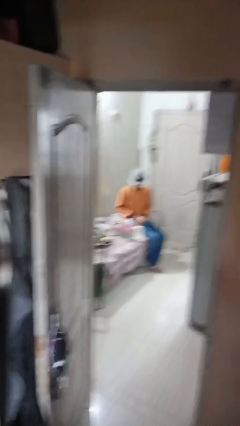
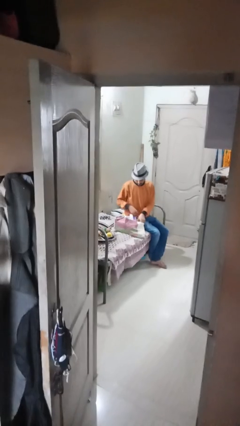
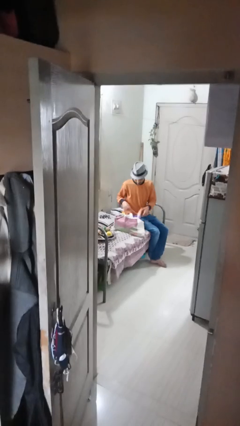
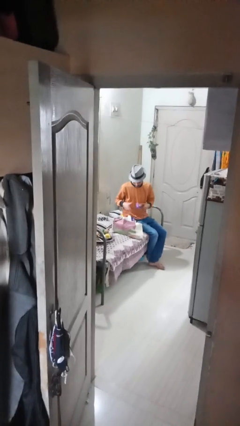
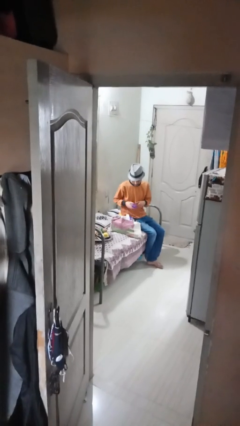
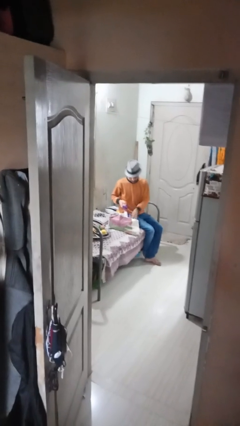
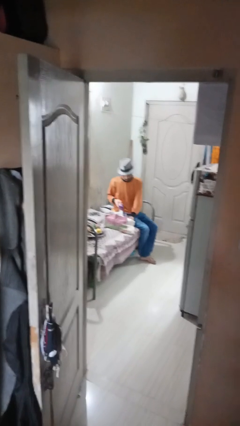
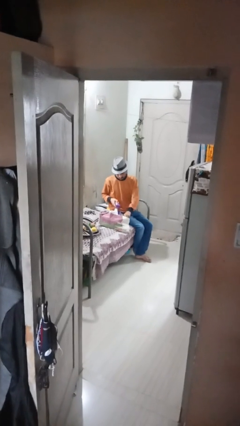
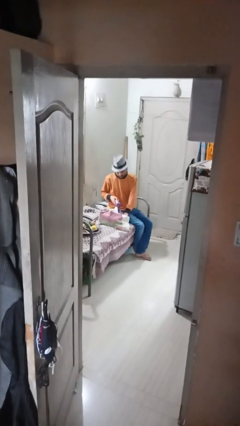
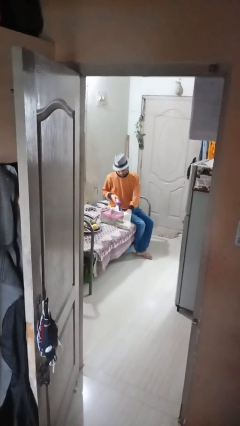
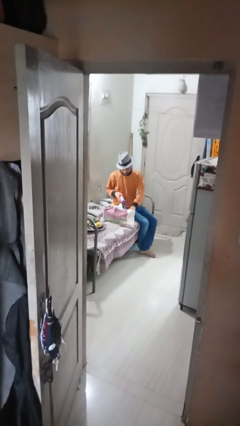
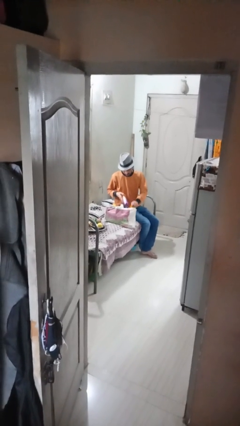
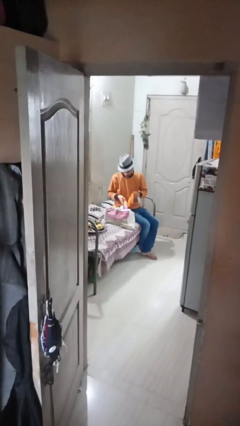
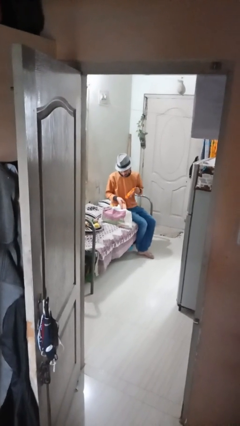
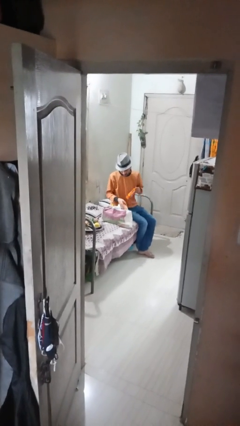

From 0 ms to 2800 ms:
person searches in bag

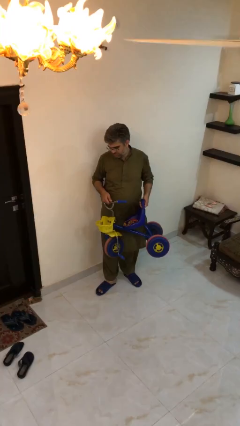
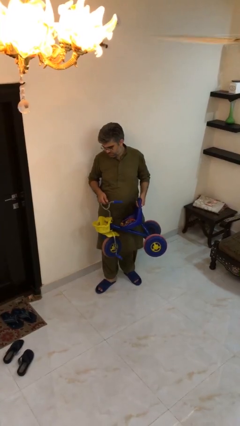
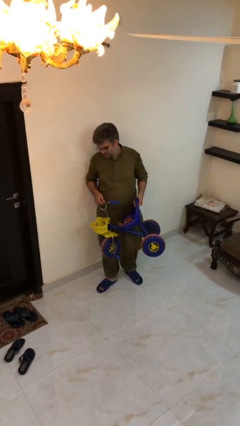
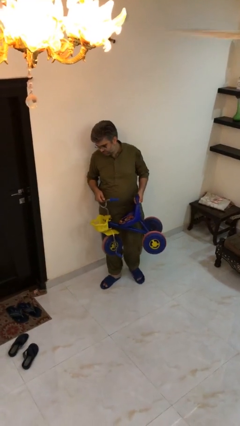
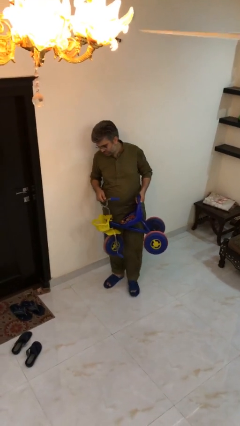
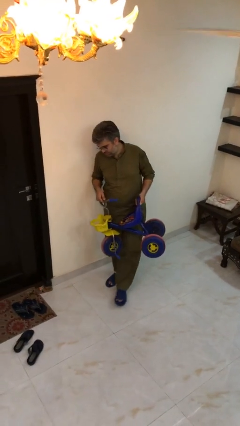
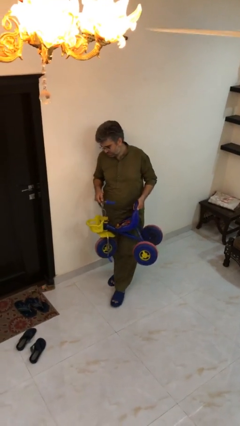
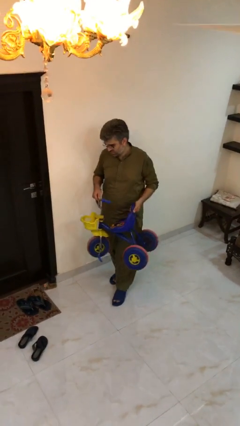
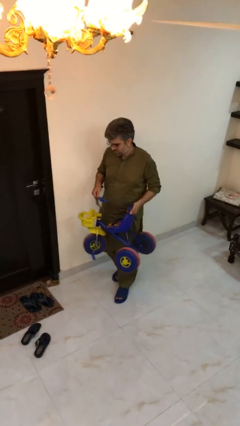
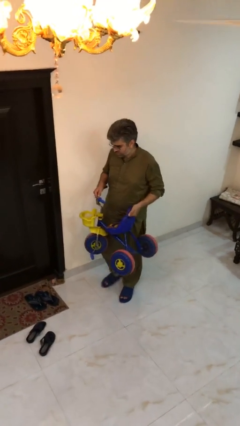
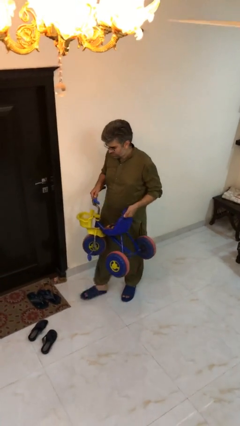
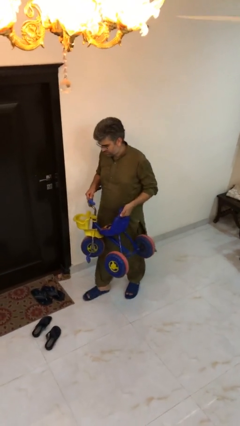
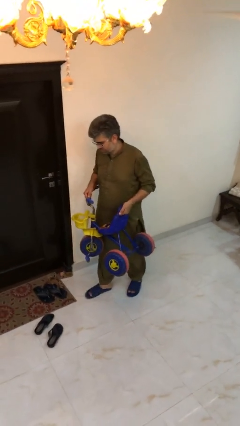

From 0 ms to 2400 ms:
person carries heavy object

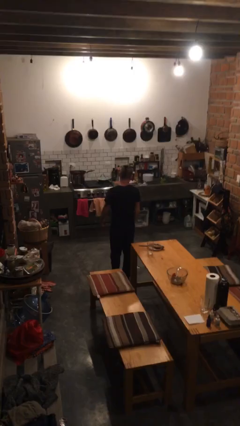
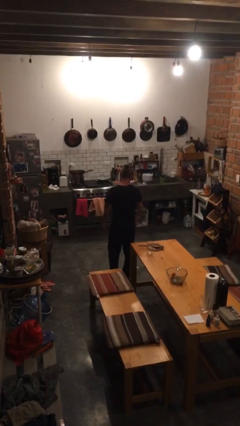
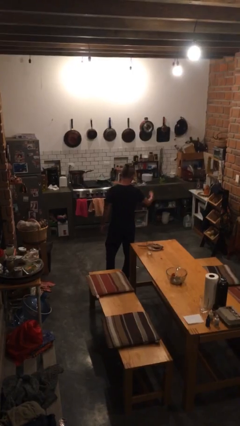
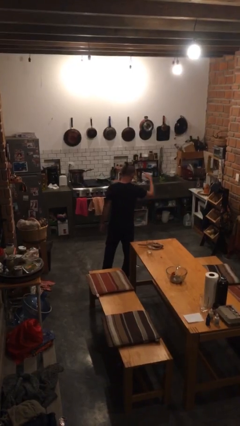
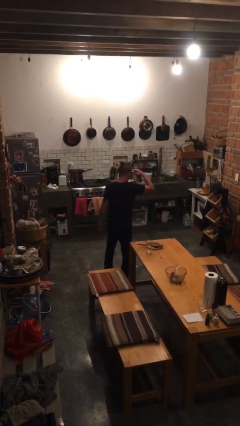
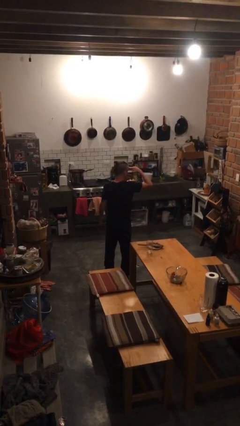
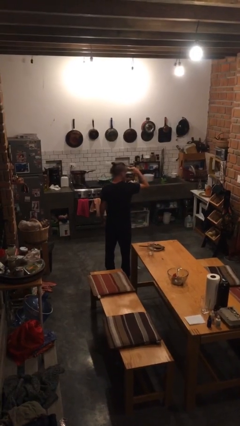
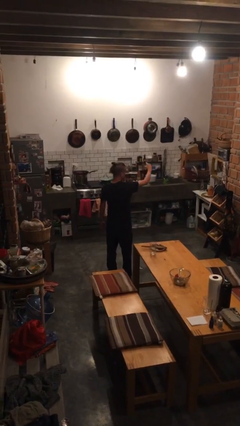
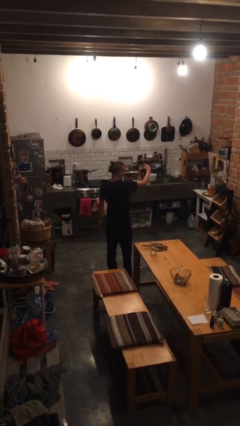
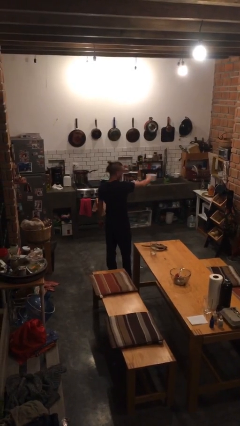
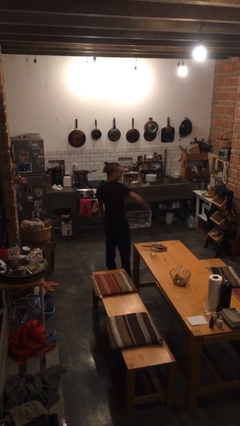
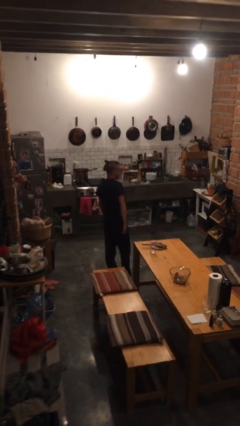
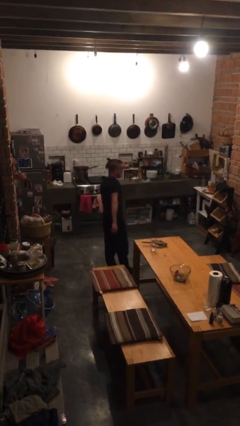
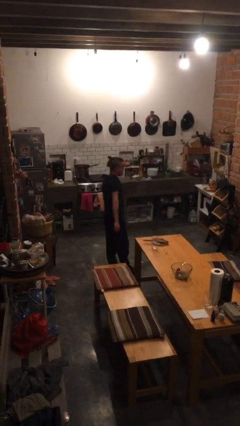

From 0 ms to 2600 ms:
person salutes

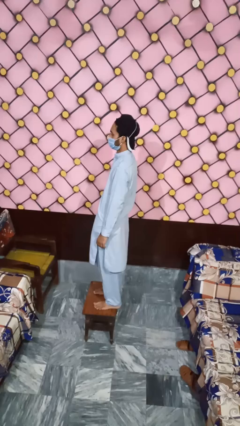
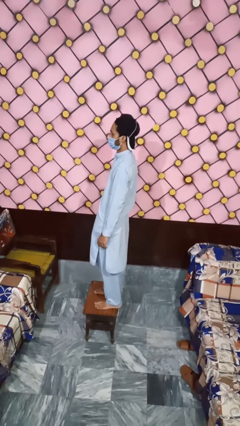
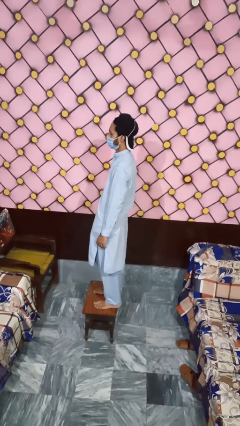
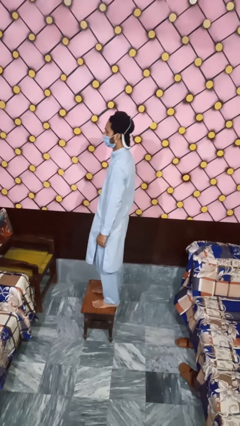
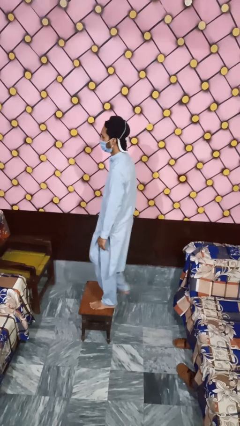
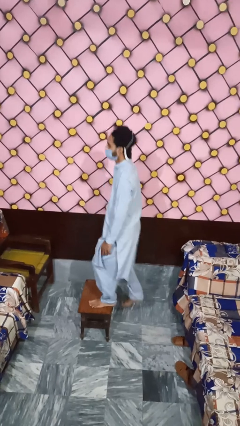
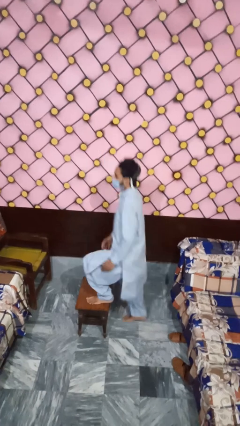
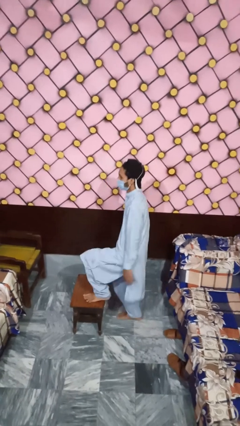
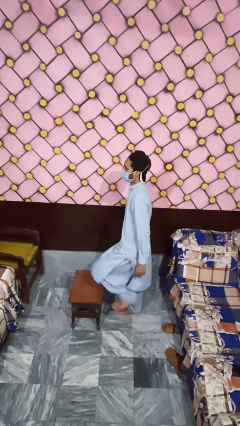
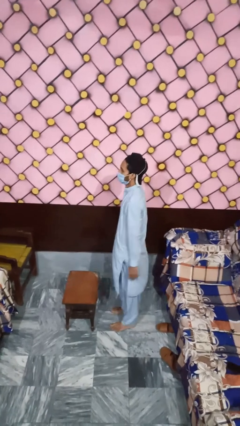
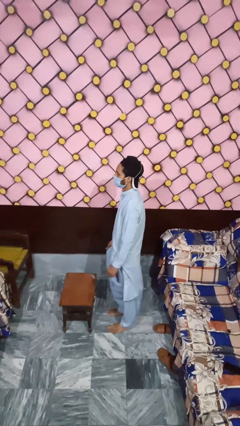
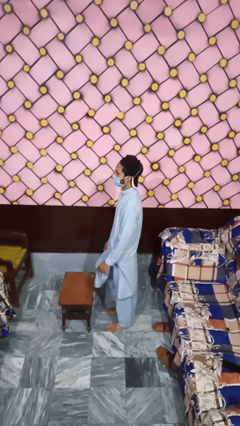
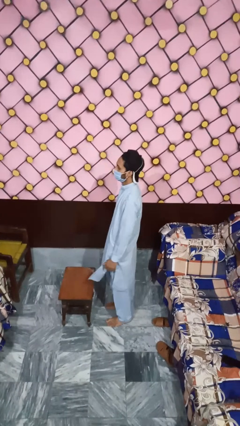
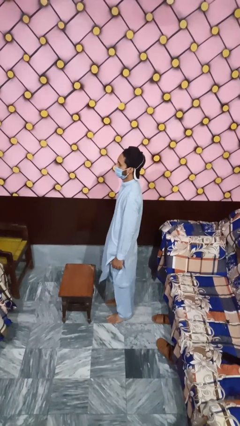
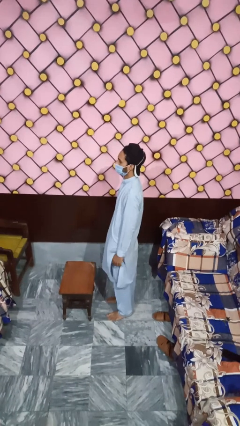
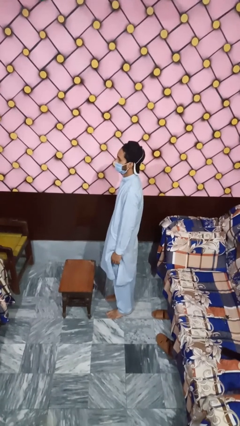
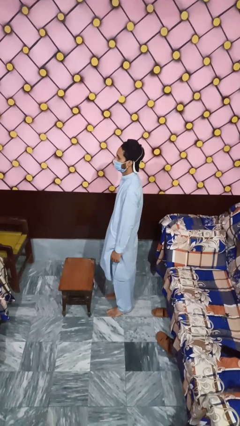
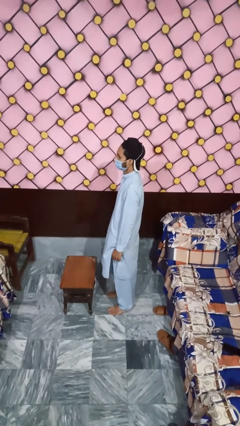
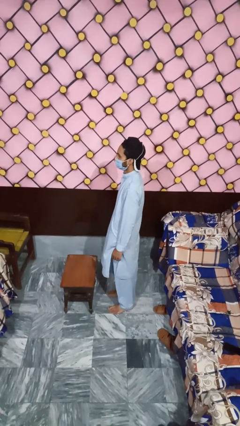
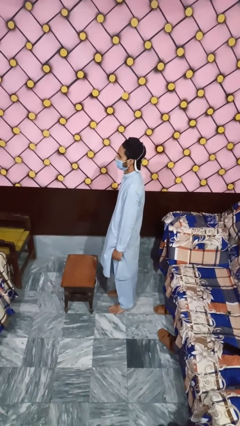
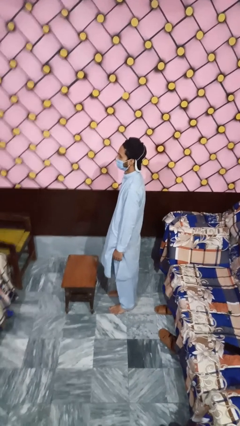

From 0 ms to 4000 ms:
person climbs off table

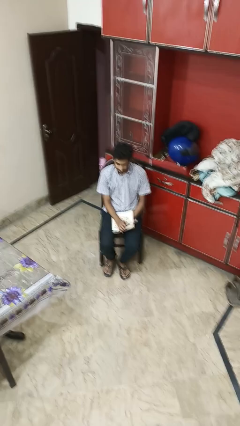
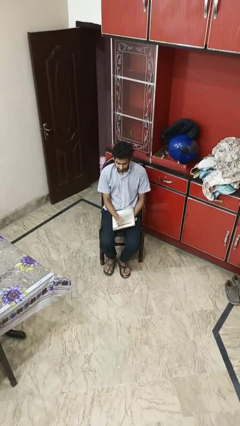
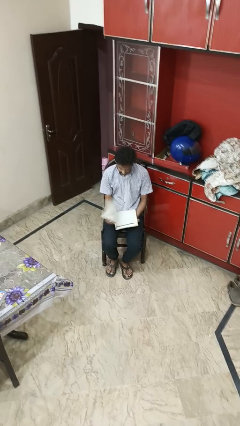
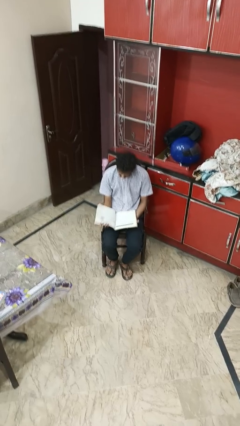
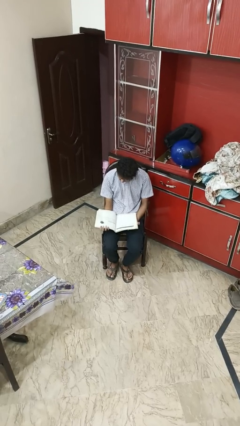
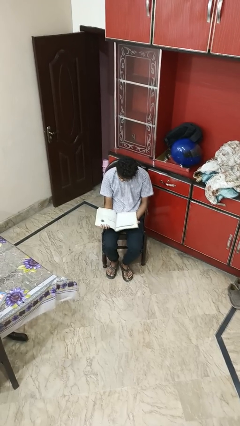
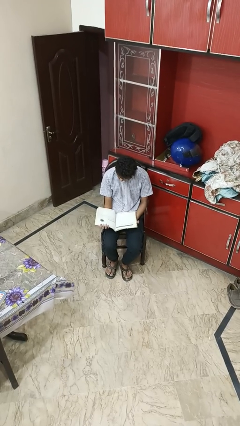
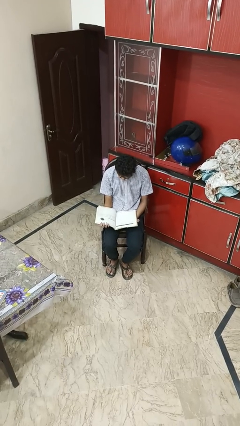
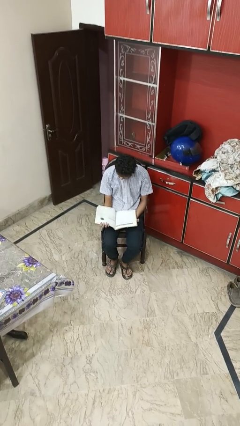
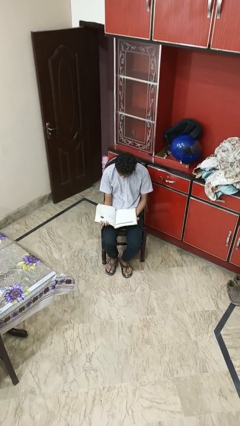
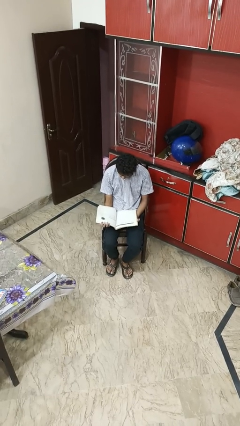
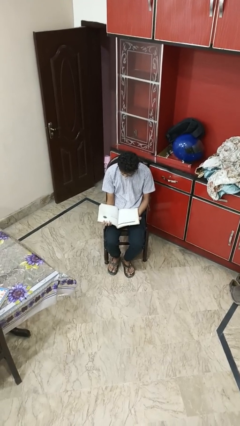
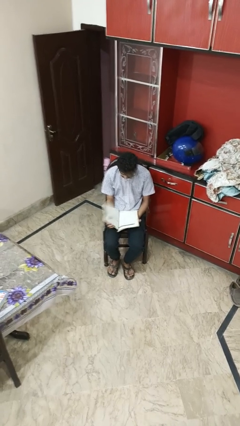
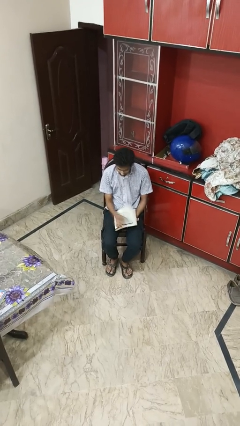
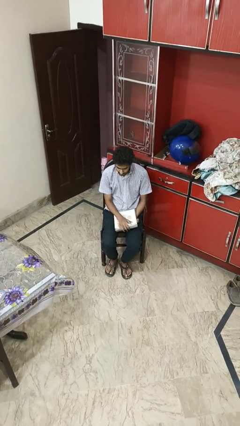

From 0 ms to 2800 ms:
person reads magazine

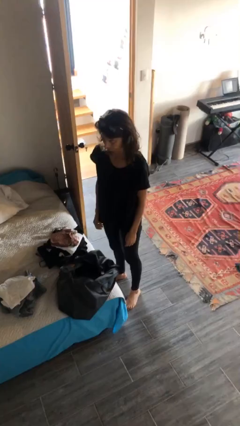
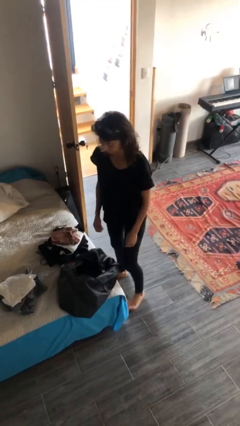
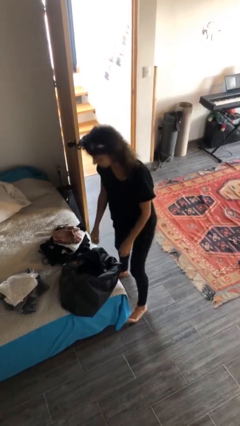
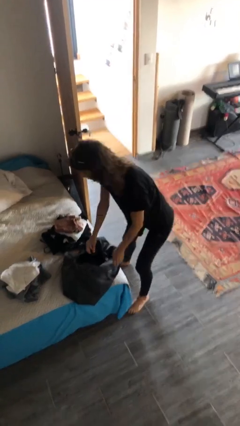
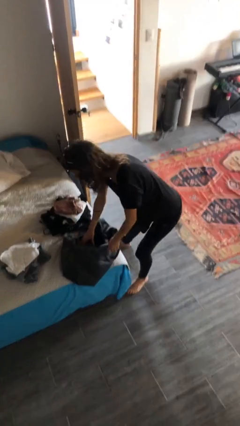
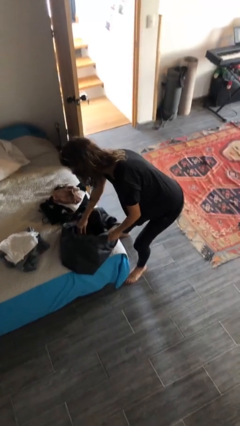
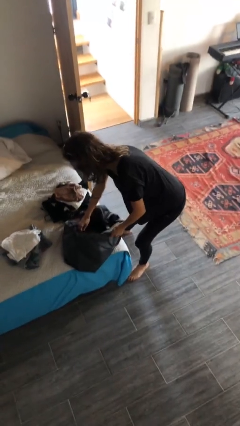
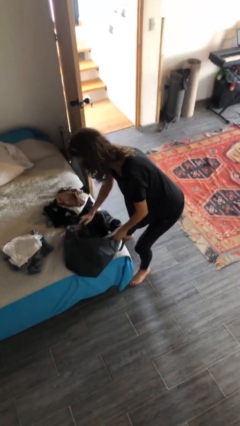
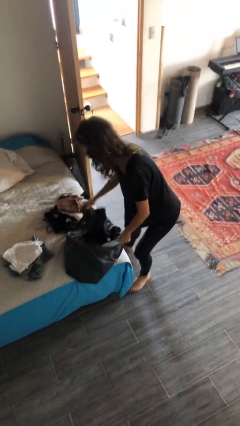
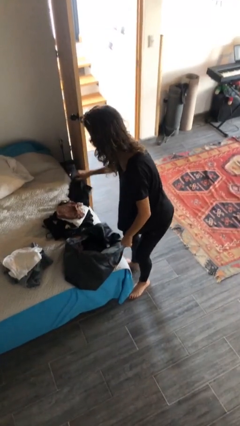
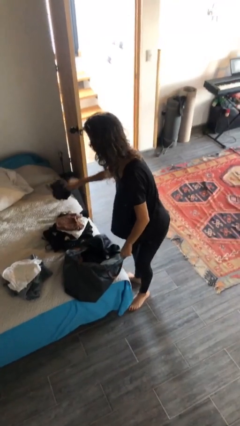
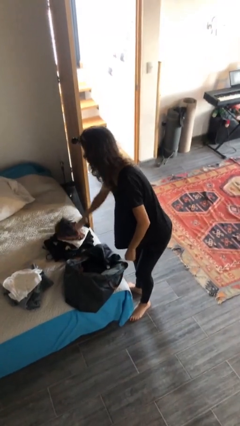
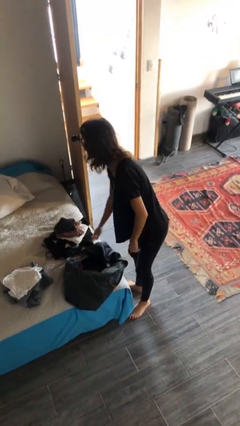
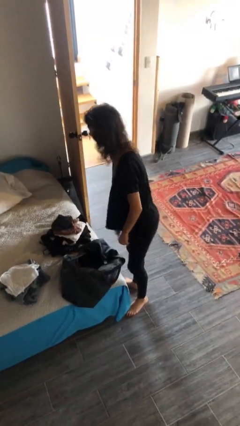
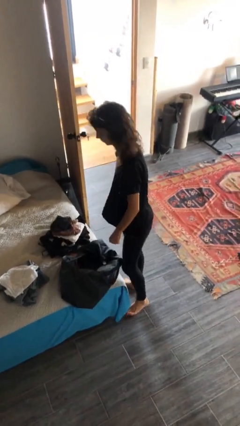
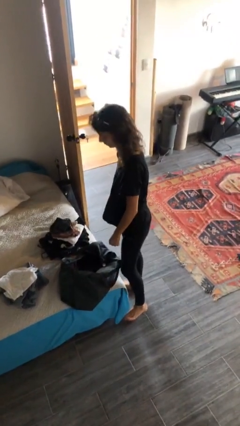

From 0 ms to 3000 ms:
person unloads clothes from suitcase

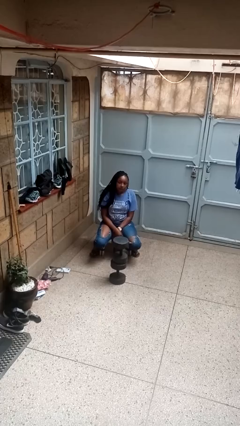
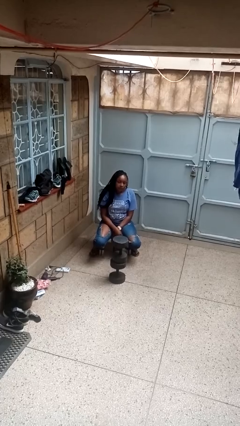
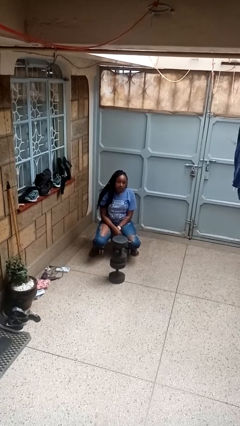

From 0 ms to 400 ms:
person gestures listen closely
